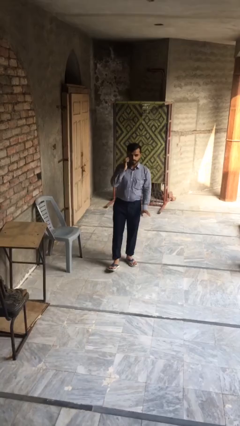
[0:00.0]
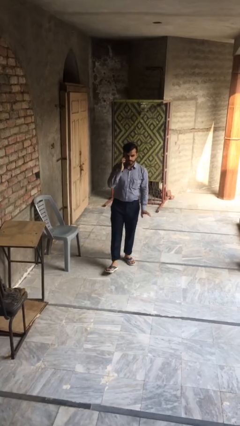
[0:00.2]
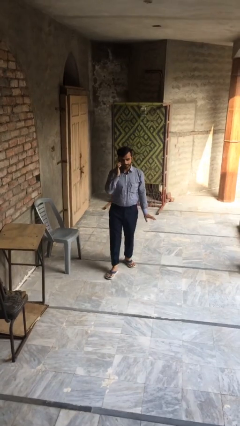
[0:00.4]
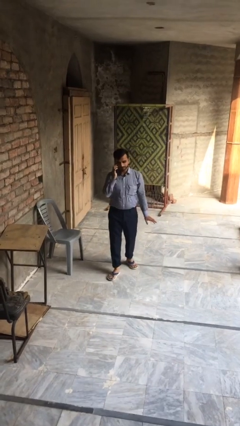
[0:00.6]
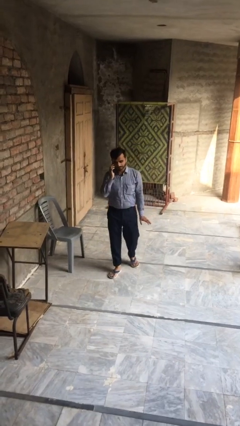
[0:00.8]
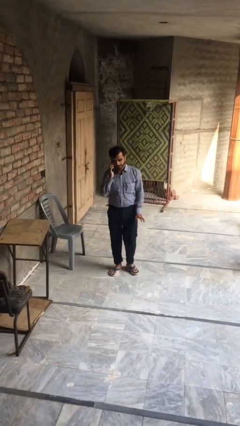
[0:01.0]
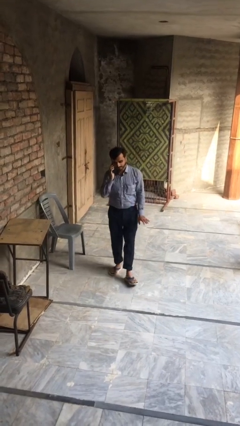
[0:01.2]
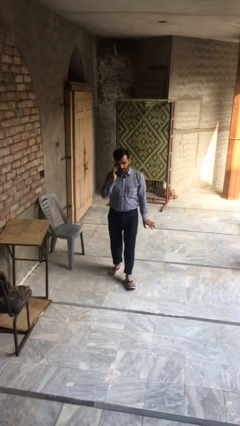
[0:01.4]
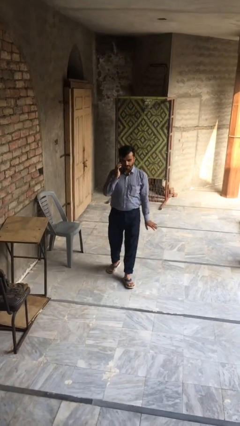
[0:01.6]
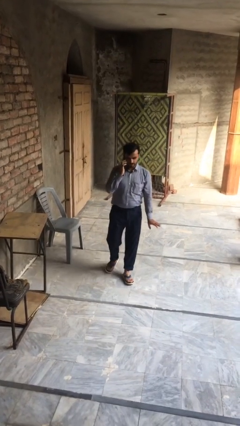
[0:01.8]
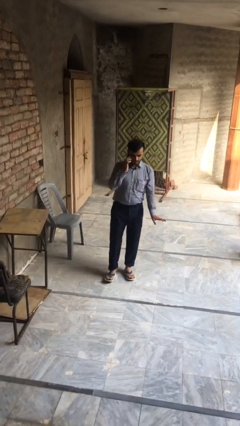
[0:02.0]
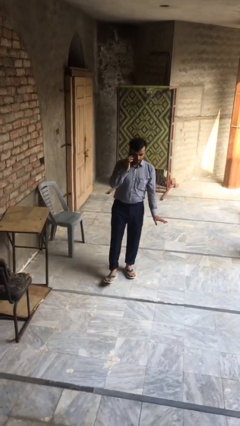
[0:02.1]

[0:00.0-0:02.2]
person talks on phone

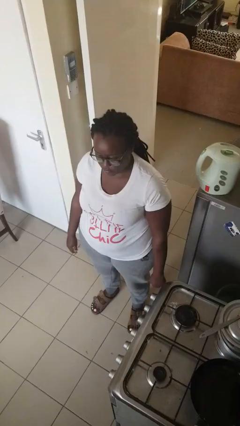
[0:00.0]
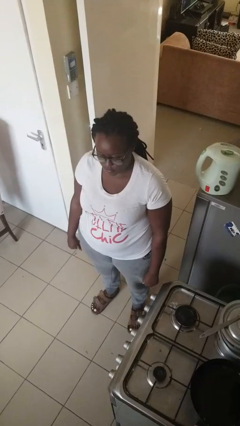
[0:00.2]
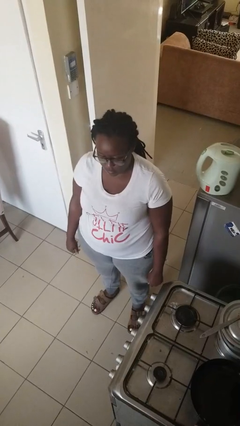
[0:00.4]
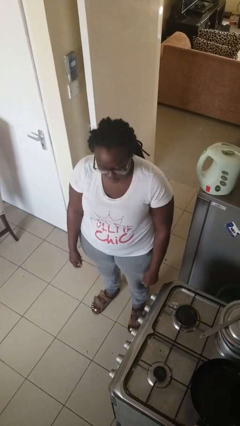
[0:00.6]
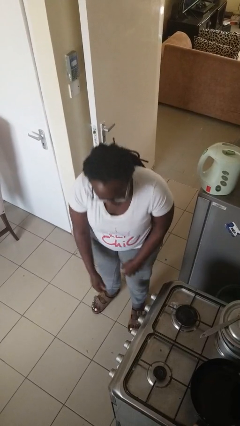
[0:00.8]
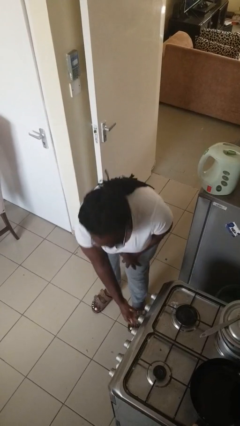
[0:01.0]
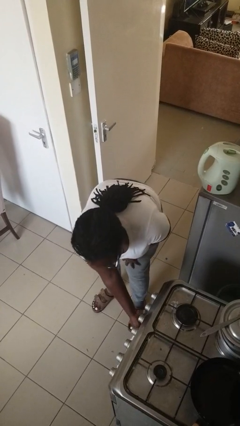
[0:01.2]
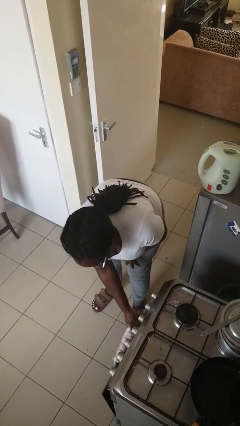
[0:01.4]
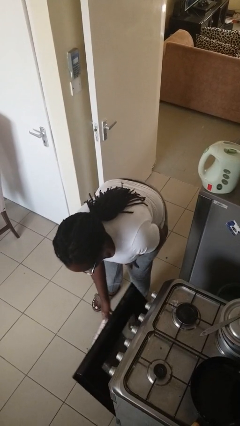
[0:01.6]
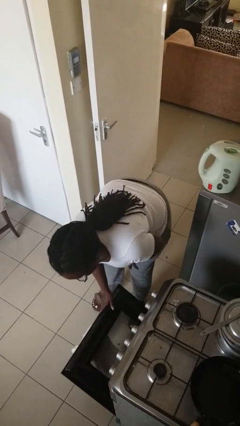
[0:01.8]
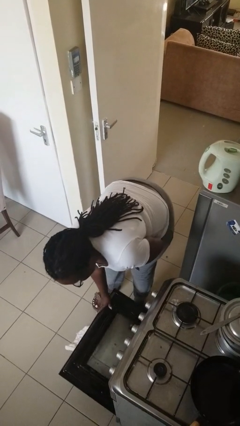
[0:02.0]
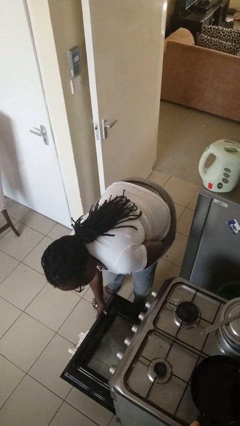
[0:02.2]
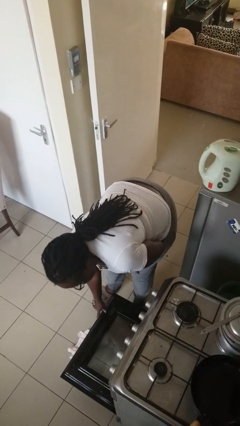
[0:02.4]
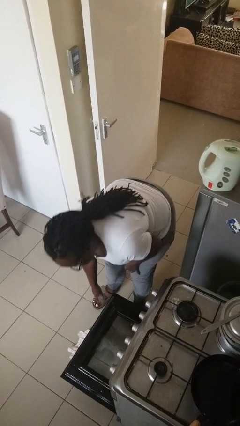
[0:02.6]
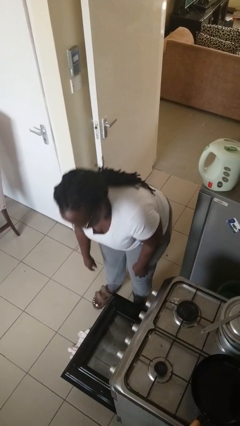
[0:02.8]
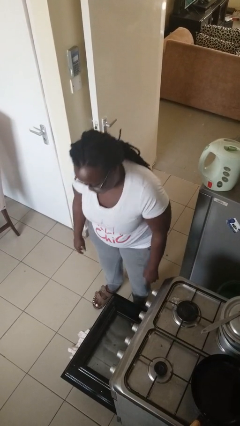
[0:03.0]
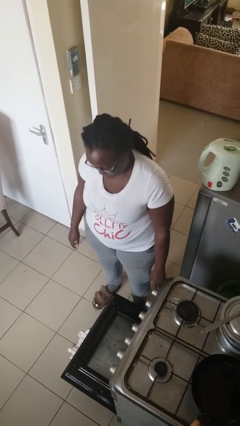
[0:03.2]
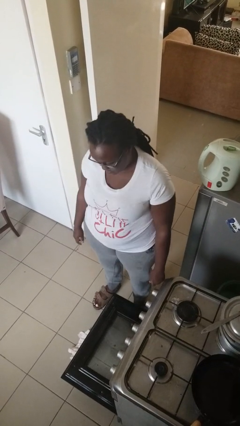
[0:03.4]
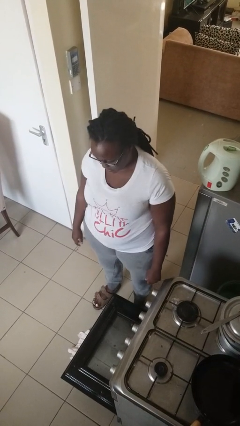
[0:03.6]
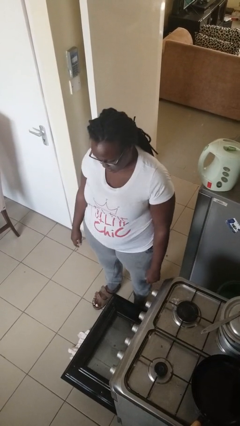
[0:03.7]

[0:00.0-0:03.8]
person opens oven door

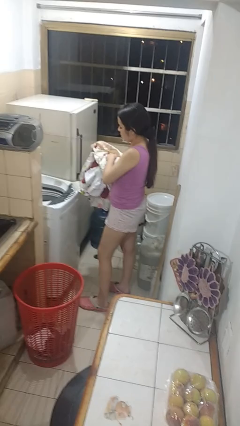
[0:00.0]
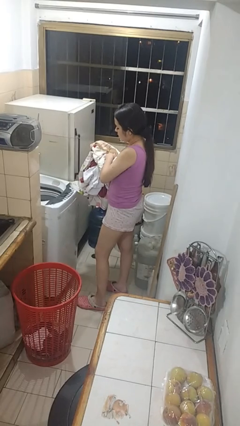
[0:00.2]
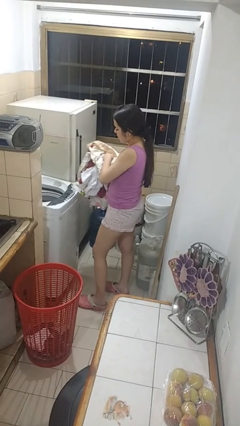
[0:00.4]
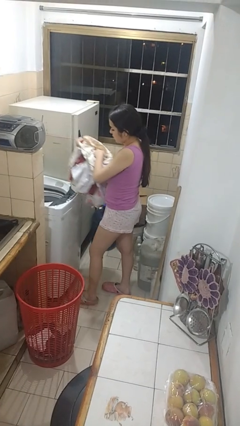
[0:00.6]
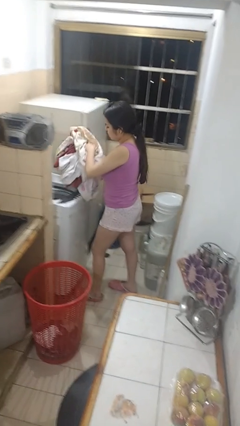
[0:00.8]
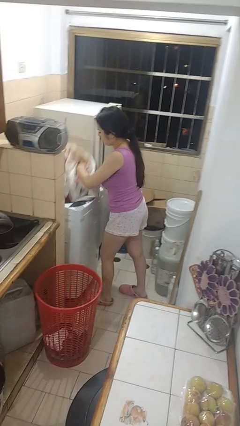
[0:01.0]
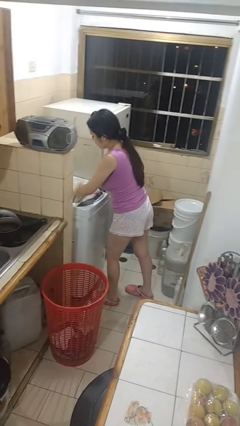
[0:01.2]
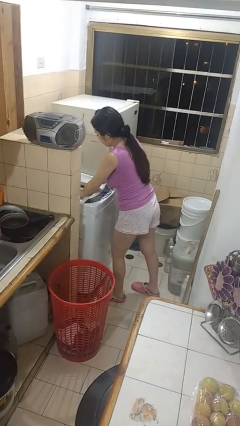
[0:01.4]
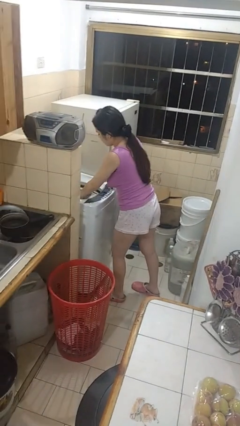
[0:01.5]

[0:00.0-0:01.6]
person loads clotheswasher

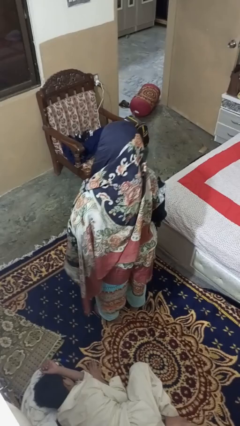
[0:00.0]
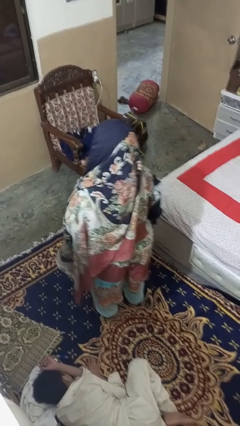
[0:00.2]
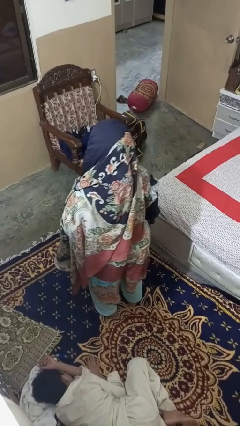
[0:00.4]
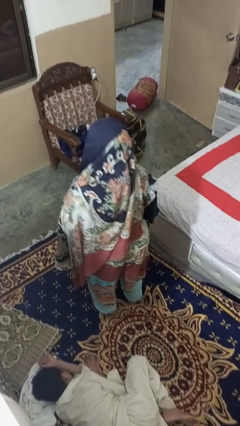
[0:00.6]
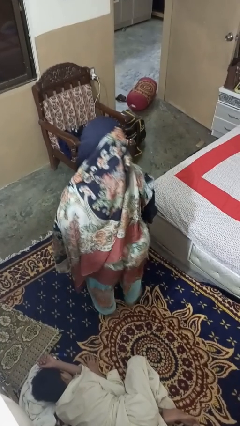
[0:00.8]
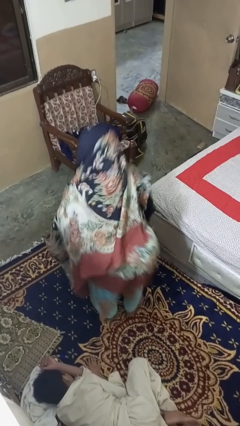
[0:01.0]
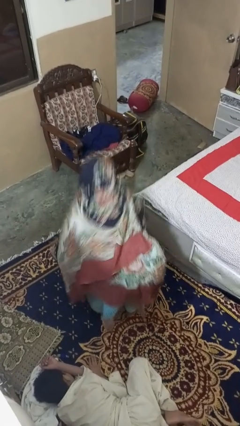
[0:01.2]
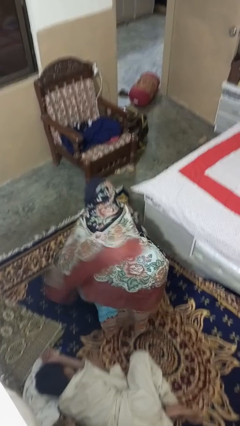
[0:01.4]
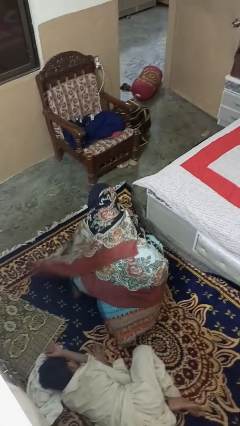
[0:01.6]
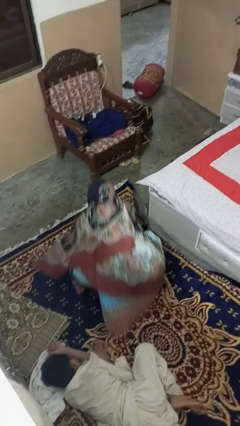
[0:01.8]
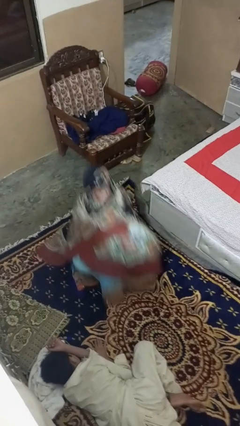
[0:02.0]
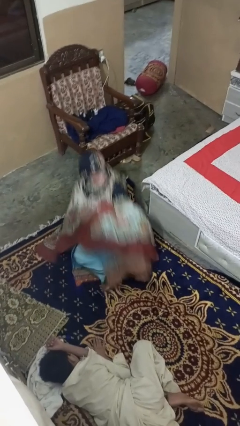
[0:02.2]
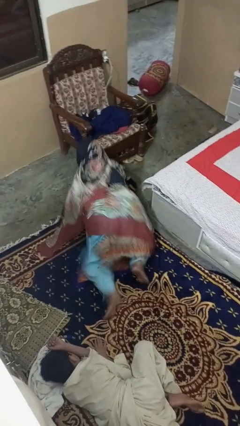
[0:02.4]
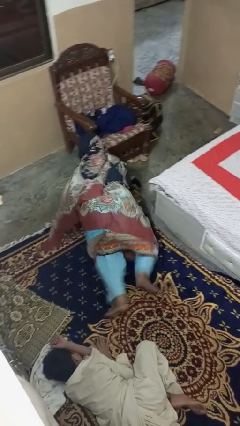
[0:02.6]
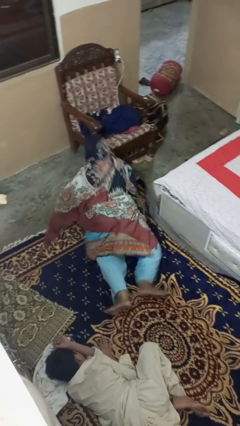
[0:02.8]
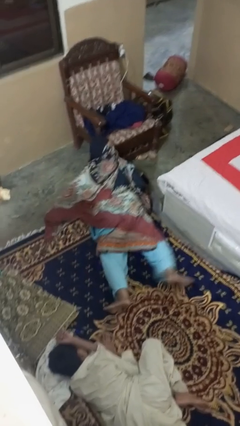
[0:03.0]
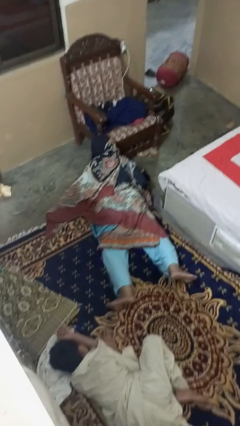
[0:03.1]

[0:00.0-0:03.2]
person exercises with pushup

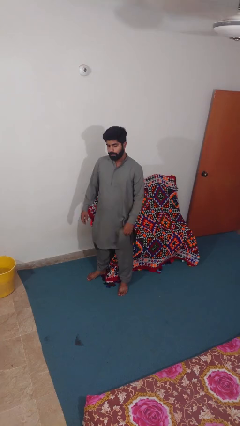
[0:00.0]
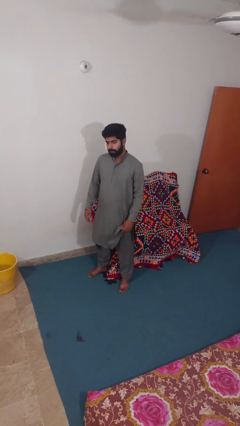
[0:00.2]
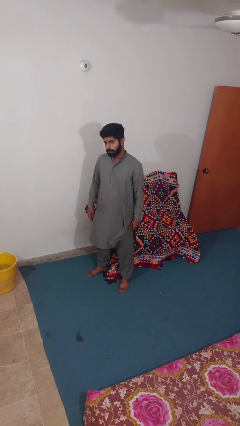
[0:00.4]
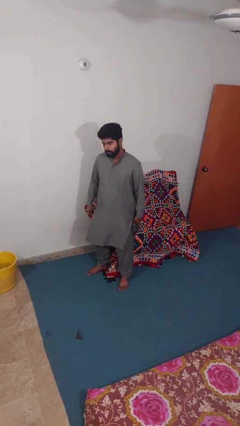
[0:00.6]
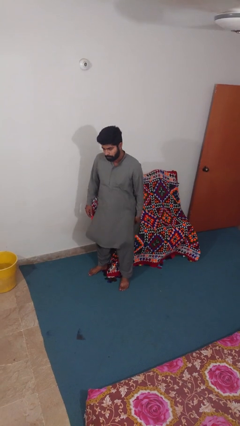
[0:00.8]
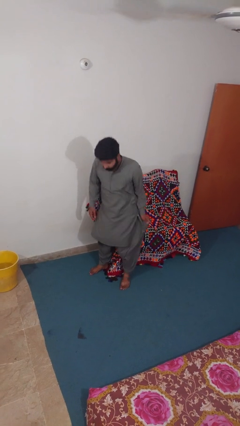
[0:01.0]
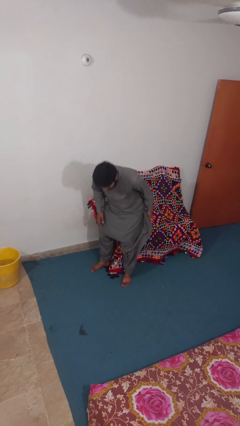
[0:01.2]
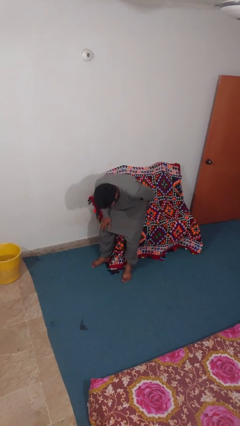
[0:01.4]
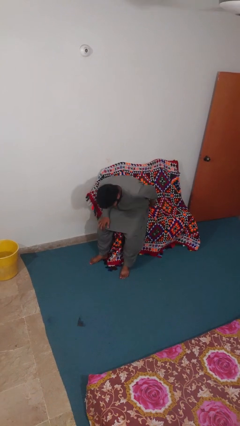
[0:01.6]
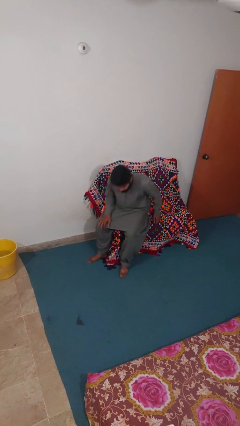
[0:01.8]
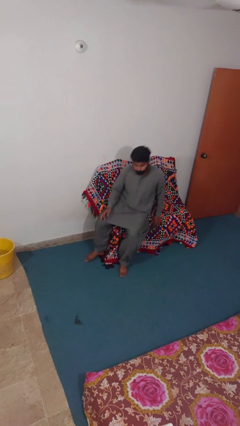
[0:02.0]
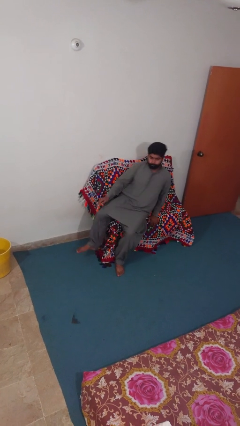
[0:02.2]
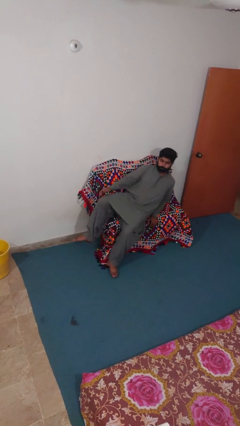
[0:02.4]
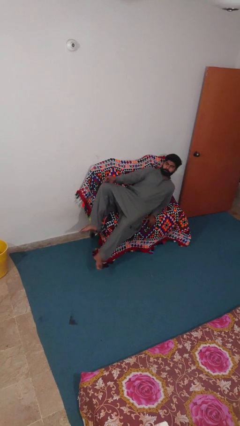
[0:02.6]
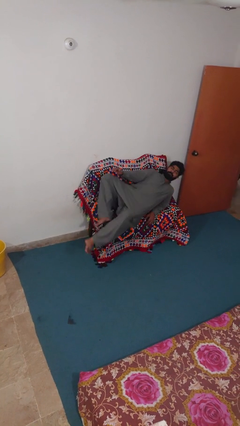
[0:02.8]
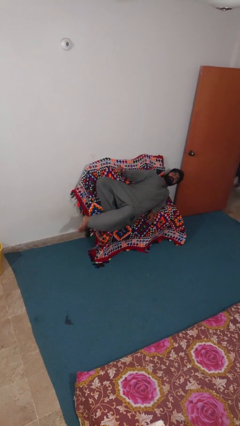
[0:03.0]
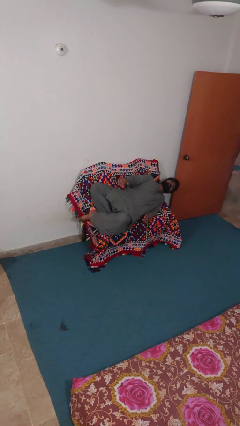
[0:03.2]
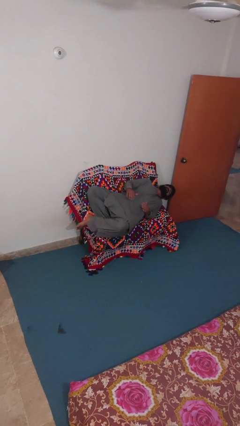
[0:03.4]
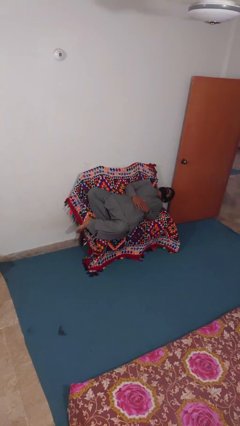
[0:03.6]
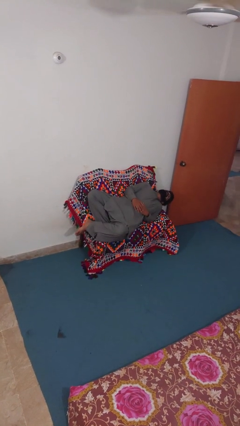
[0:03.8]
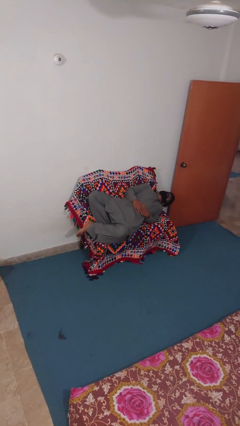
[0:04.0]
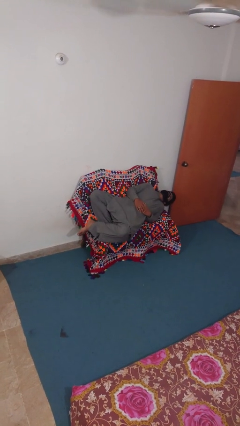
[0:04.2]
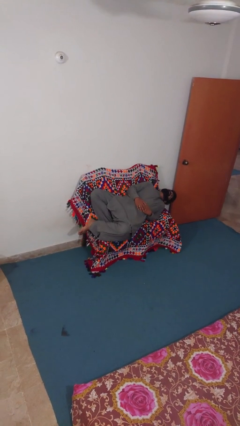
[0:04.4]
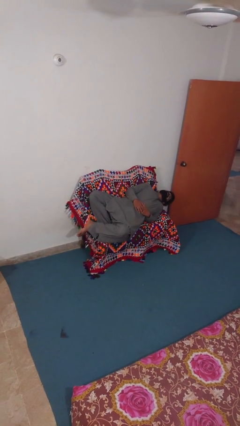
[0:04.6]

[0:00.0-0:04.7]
person lies down on couch

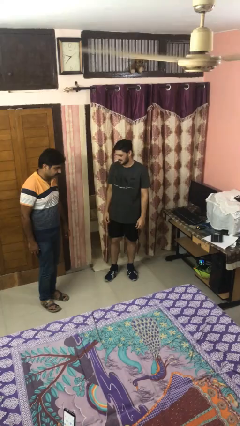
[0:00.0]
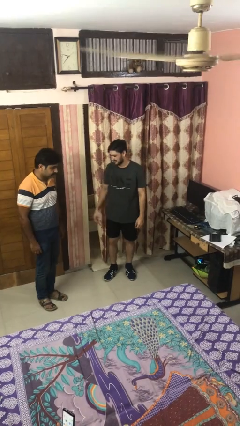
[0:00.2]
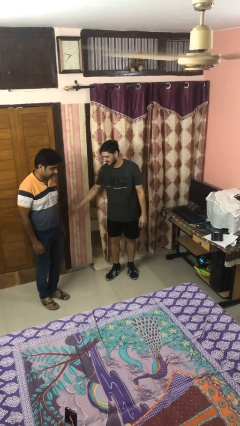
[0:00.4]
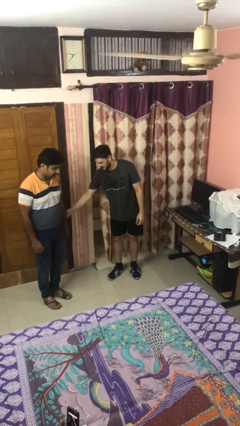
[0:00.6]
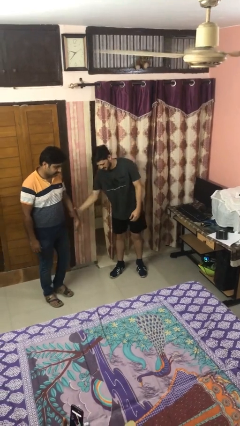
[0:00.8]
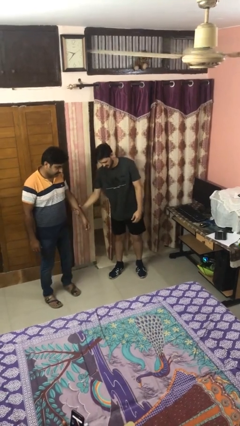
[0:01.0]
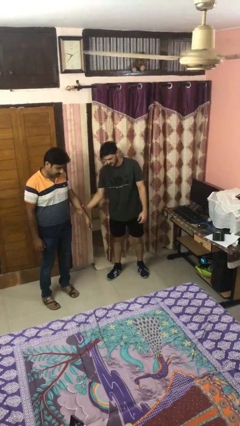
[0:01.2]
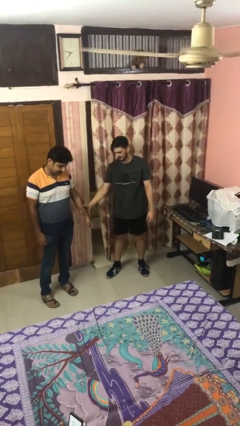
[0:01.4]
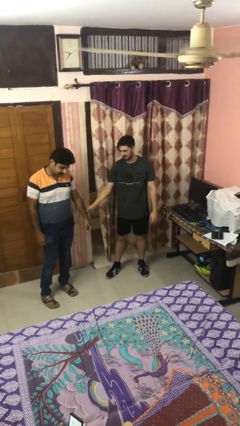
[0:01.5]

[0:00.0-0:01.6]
person grabs person by forearm
